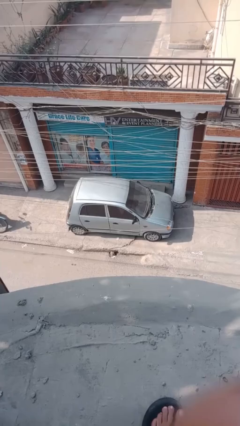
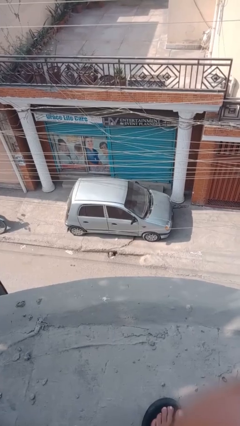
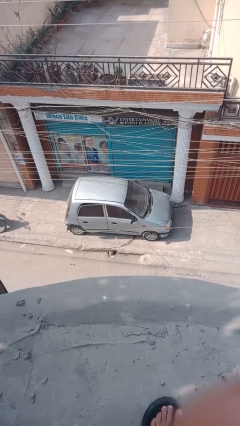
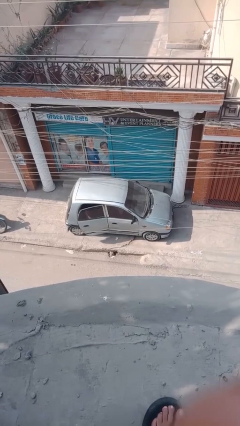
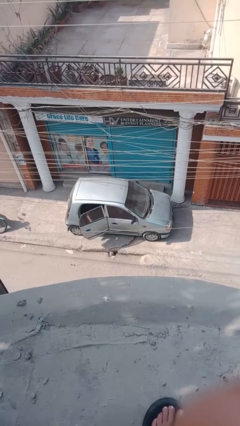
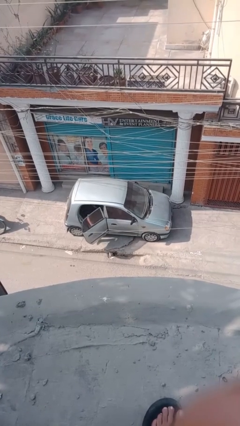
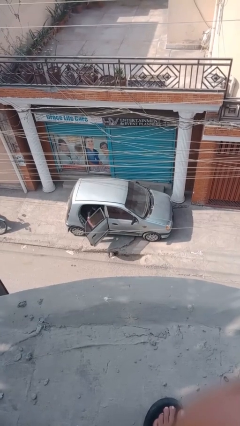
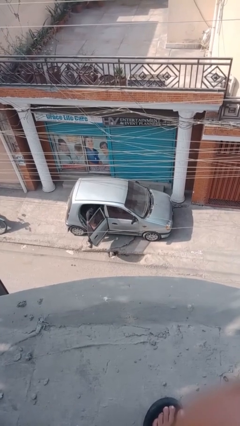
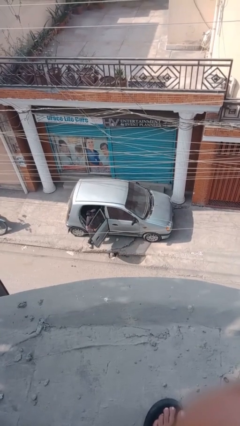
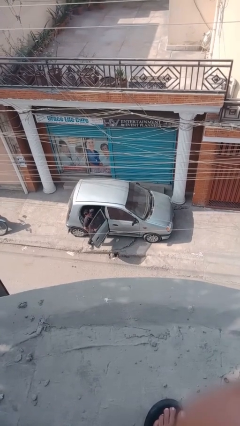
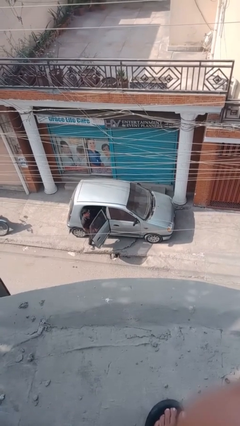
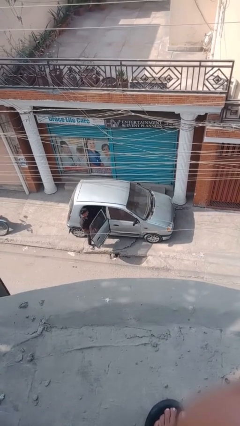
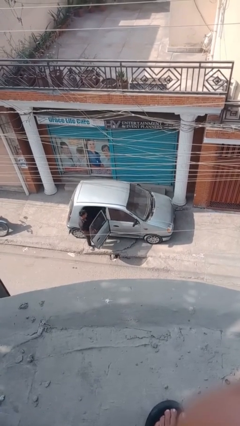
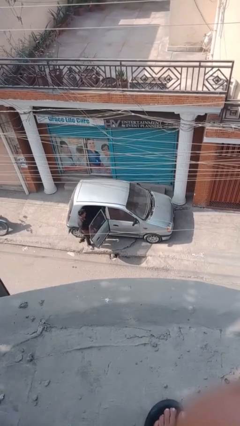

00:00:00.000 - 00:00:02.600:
car drops off person

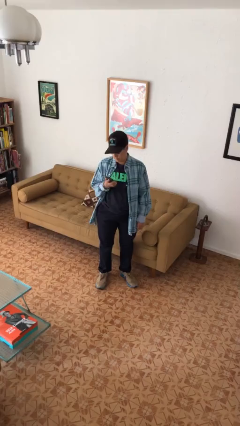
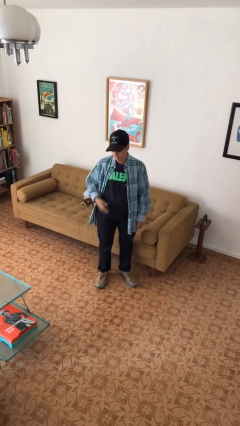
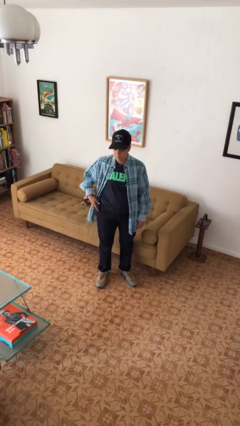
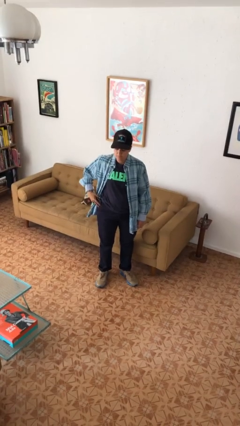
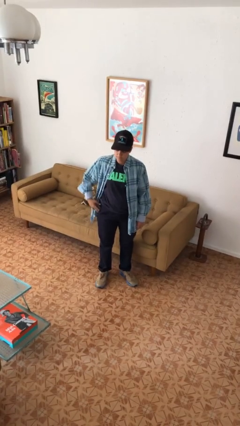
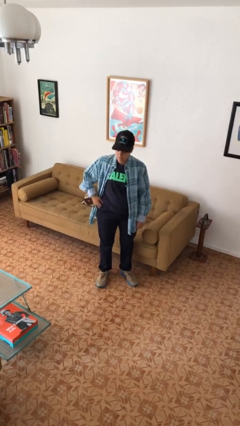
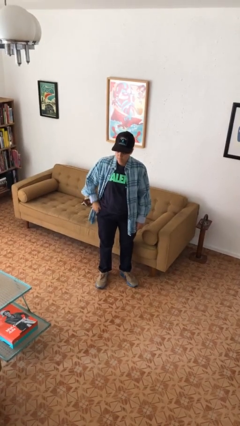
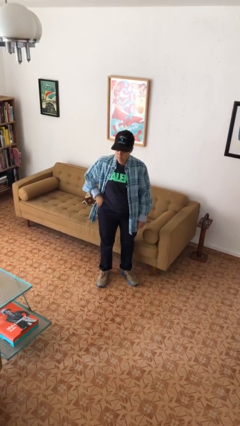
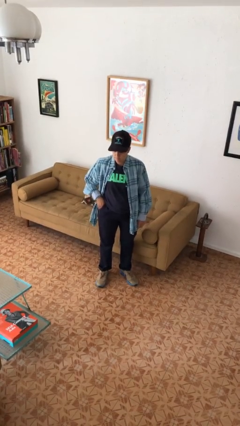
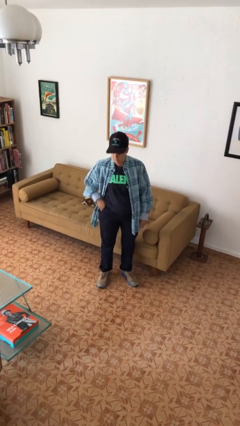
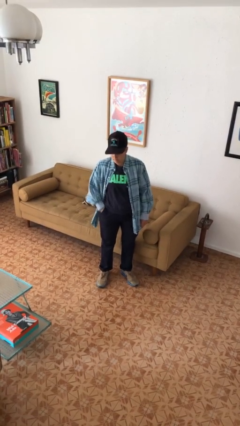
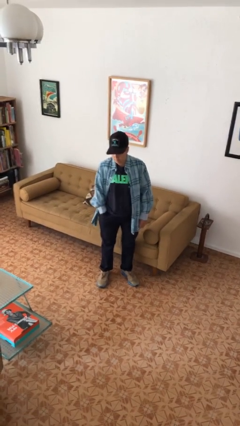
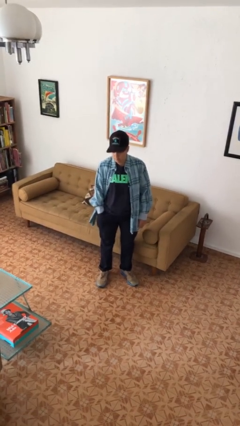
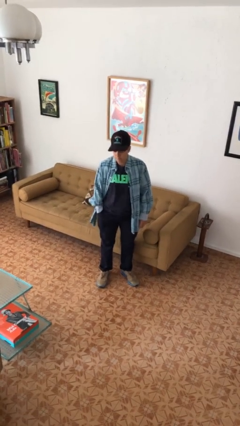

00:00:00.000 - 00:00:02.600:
person puts phone into pocket

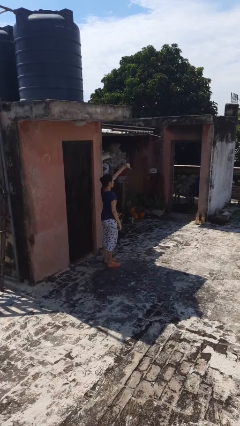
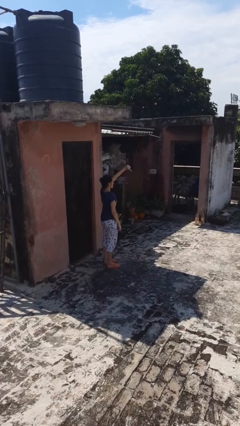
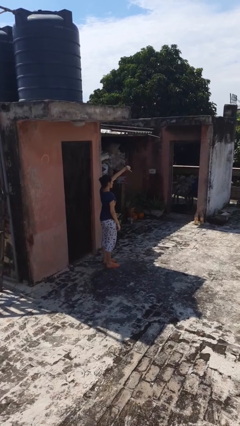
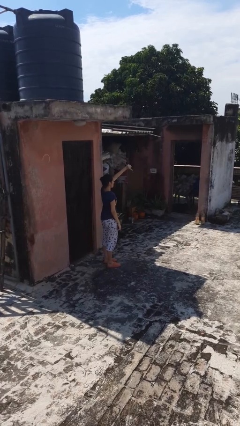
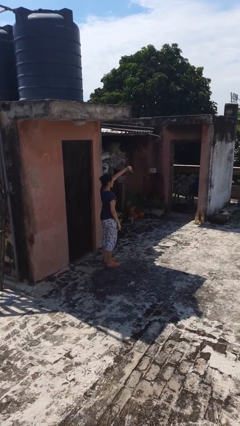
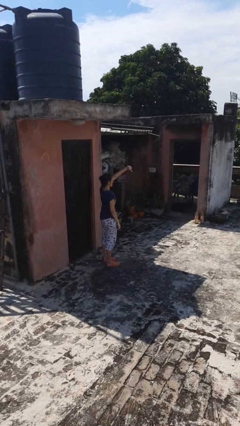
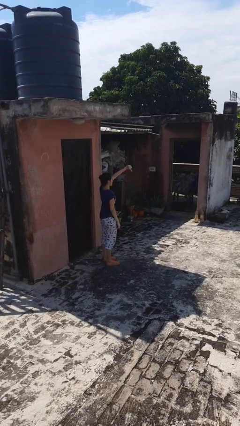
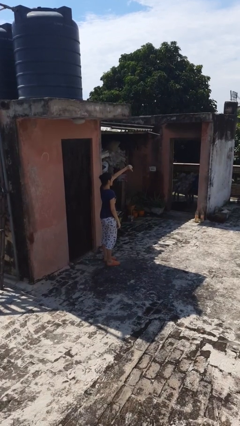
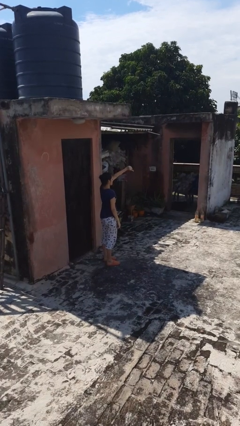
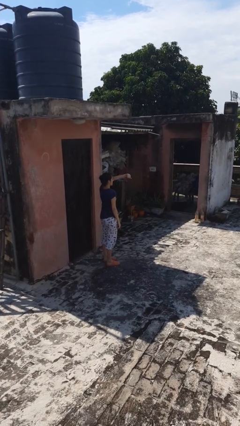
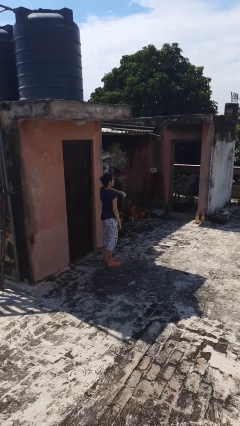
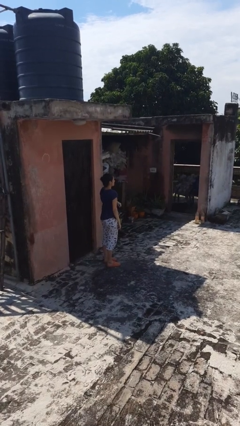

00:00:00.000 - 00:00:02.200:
person gestures thumbs down

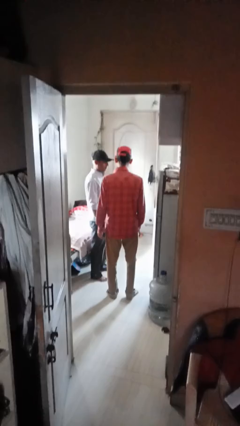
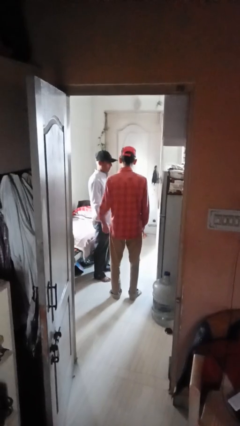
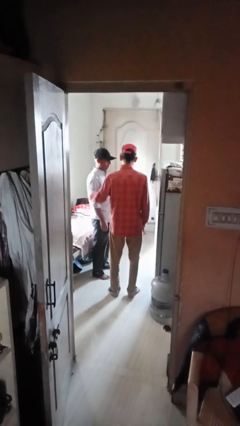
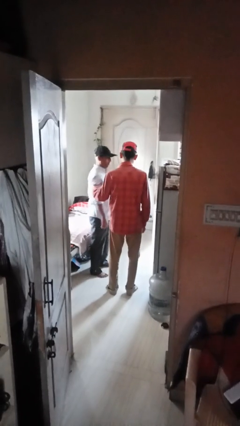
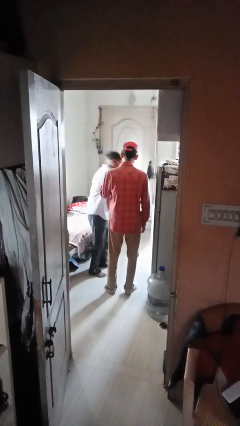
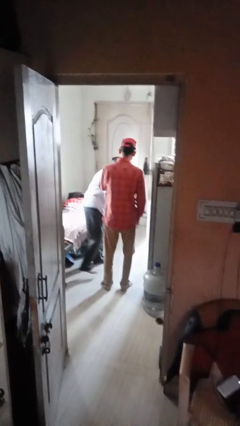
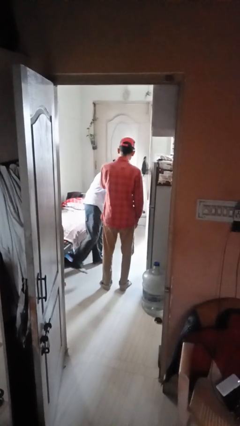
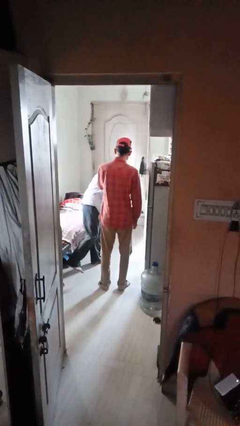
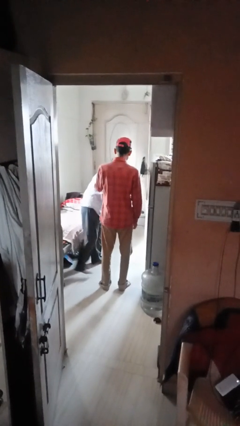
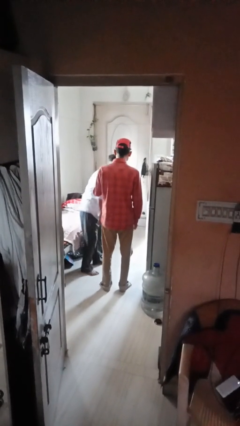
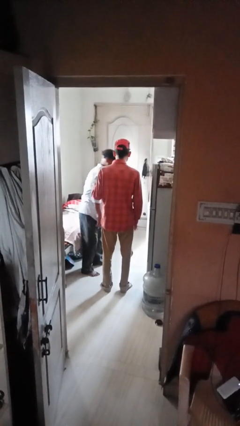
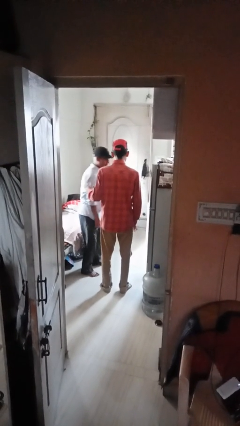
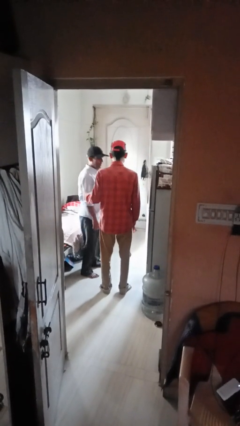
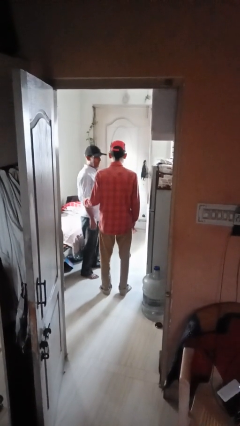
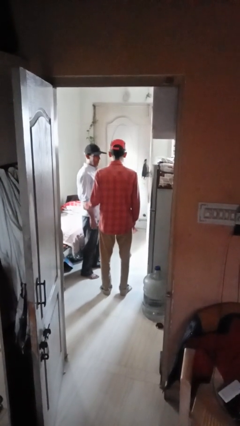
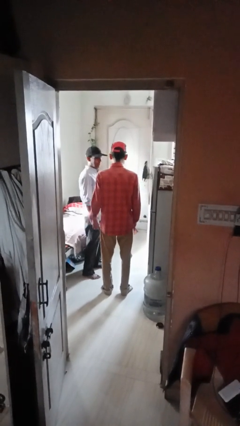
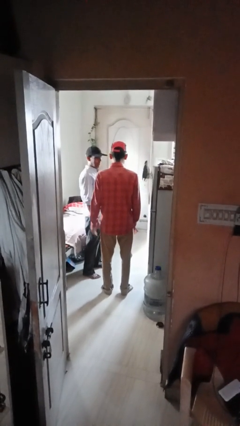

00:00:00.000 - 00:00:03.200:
person shoves person

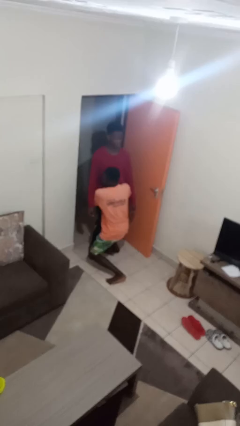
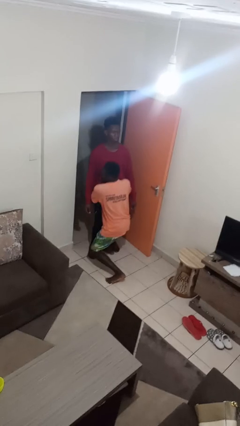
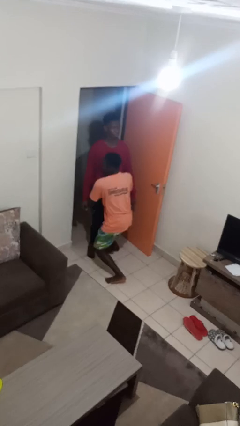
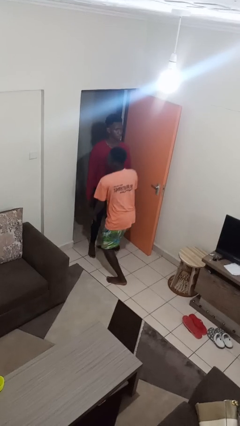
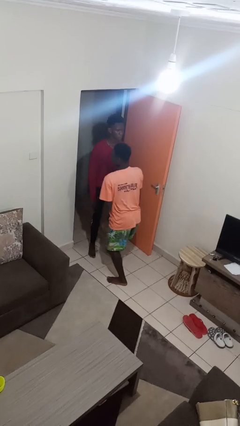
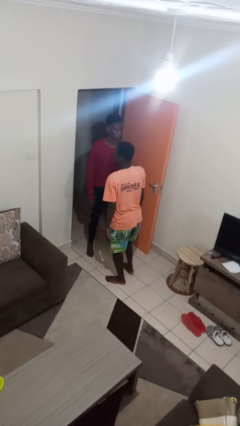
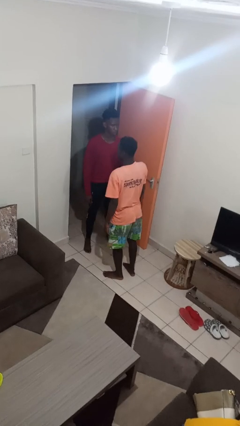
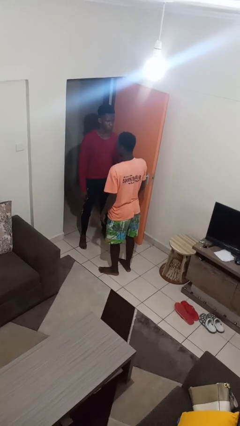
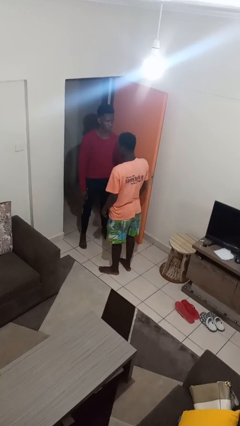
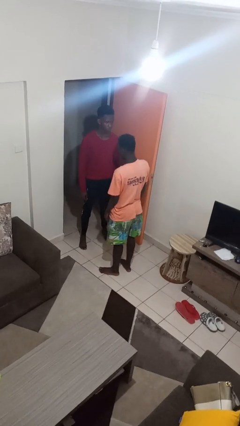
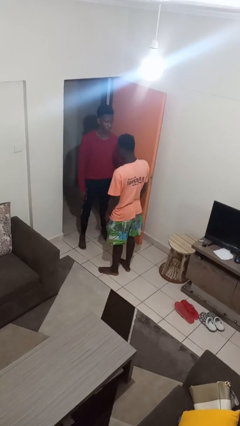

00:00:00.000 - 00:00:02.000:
person puts down person

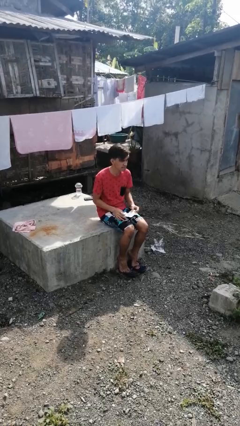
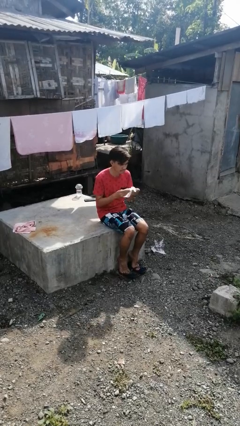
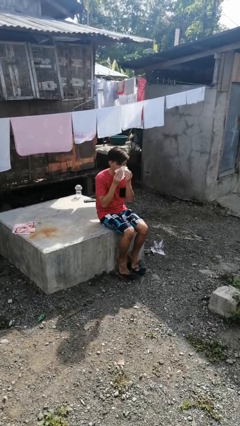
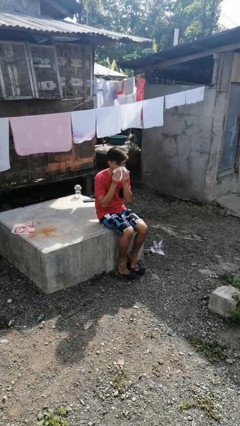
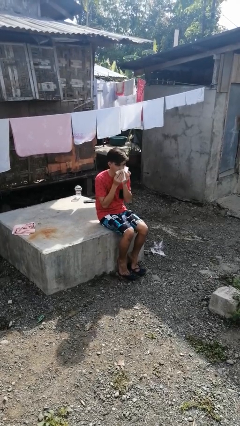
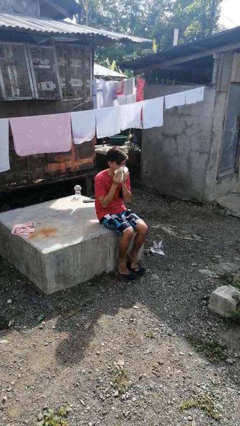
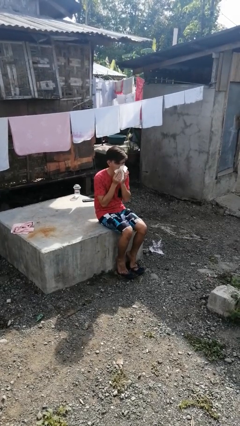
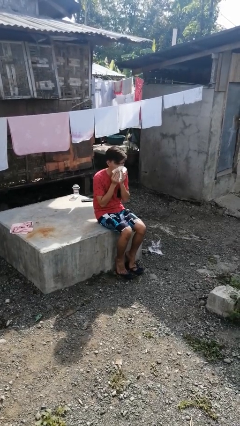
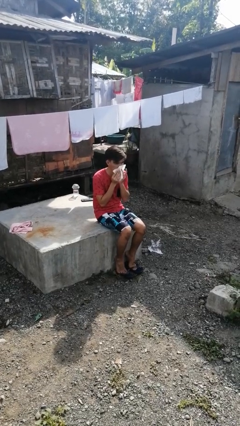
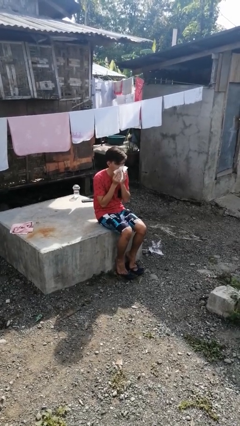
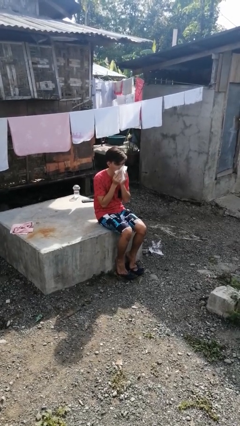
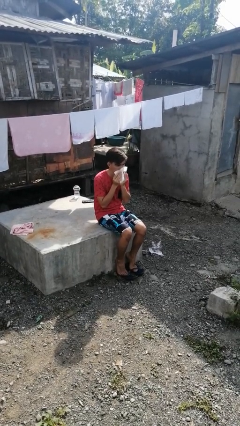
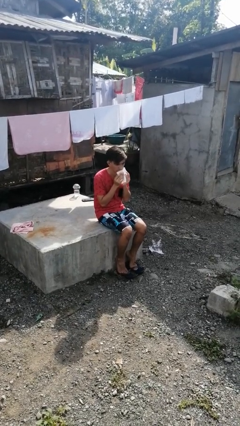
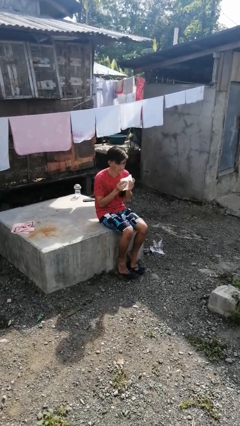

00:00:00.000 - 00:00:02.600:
person wipes mouth with napkin

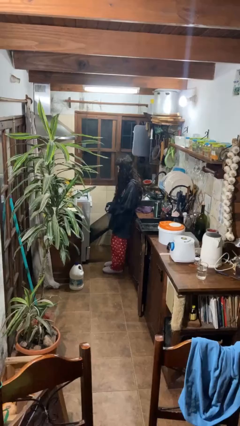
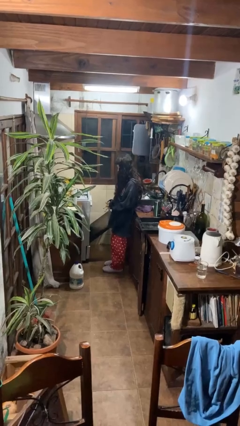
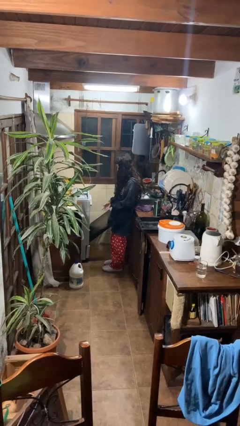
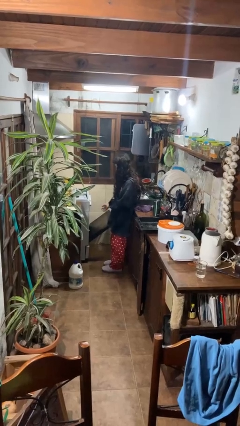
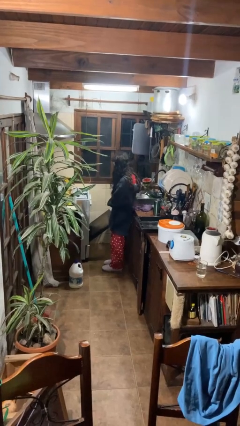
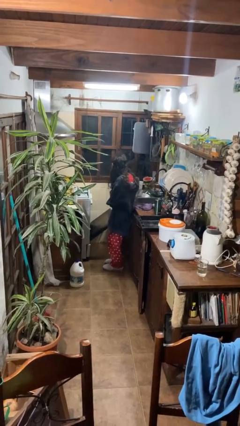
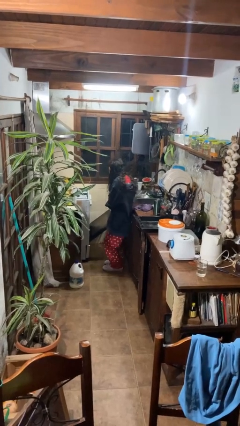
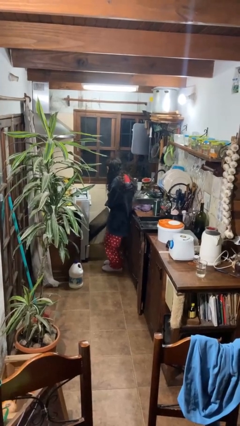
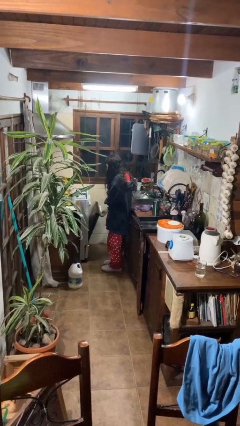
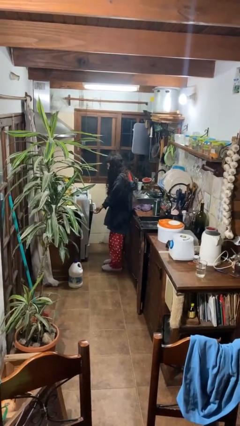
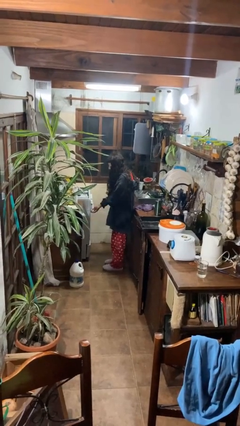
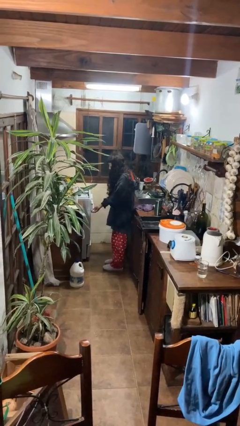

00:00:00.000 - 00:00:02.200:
person closes oven door
